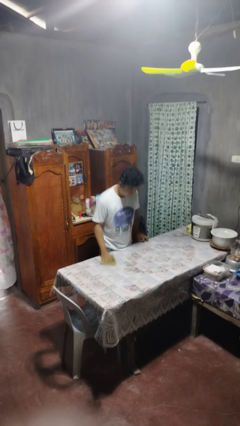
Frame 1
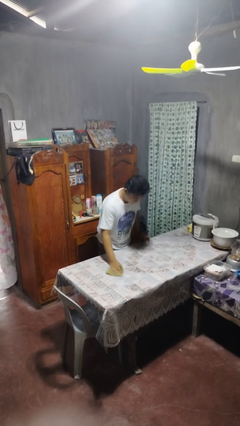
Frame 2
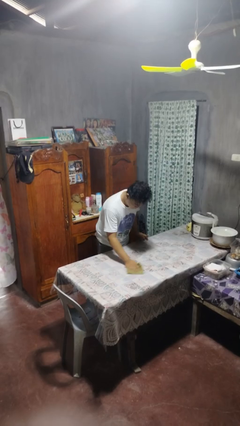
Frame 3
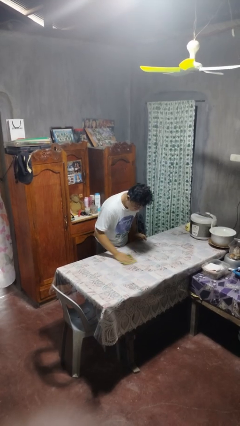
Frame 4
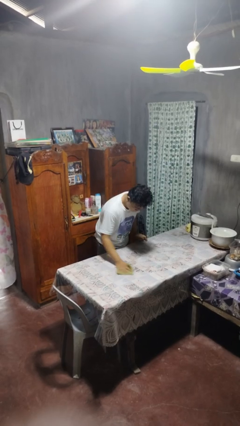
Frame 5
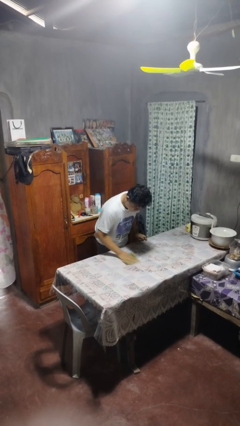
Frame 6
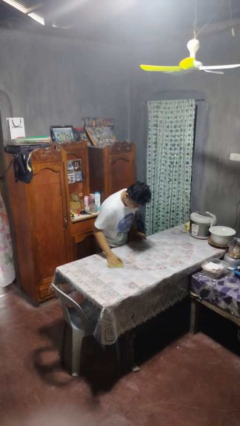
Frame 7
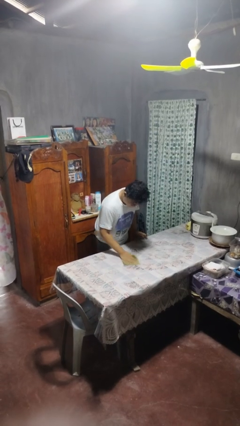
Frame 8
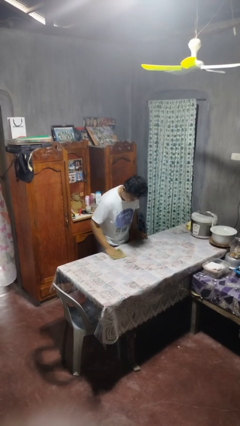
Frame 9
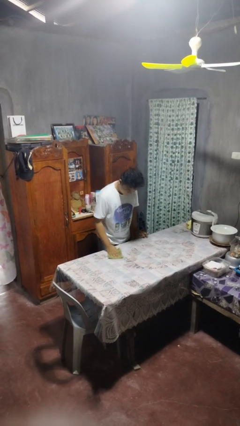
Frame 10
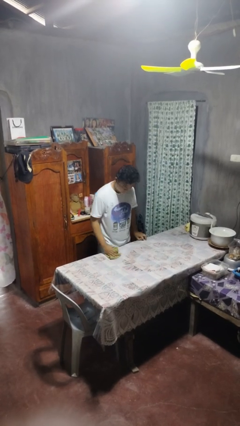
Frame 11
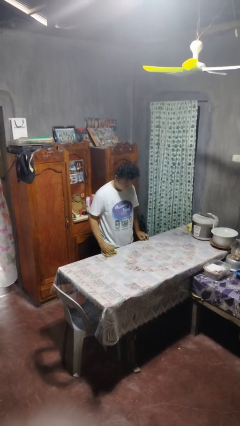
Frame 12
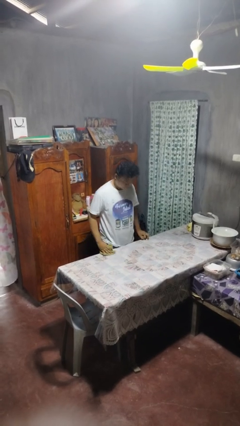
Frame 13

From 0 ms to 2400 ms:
person cleans table with rag

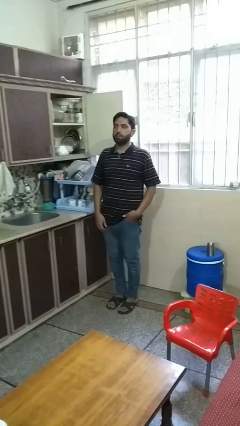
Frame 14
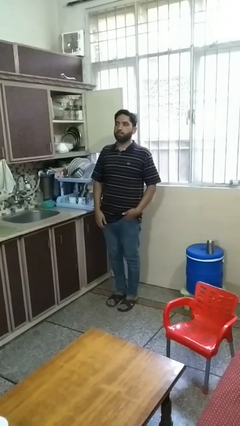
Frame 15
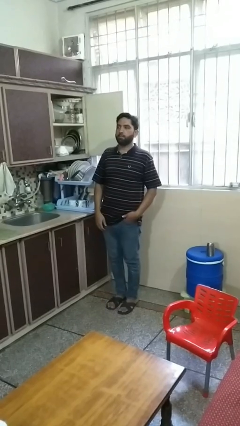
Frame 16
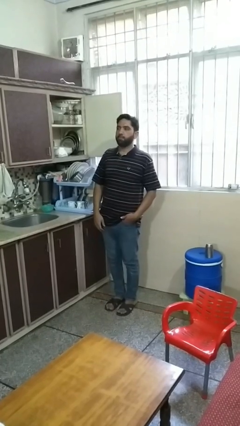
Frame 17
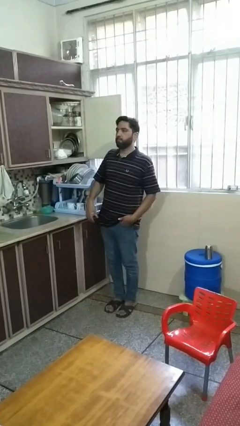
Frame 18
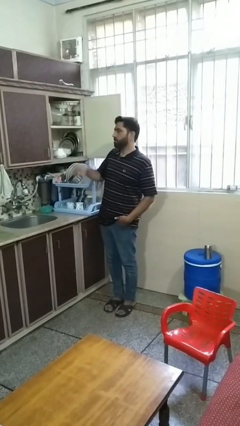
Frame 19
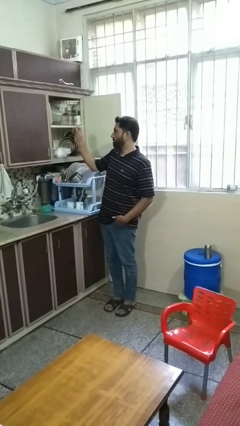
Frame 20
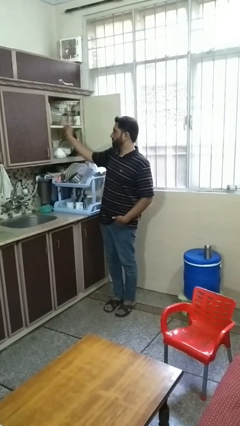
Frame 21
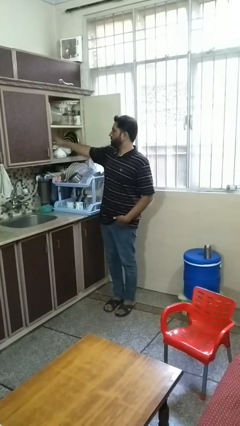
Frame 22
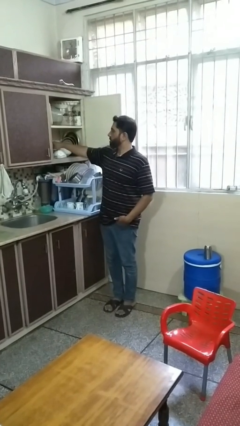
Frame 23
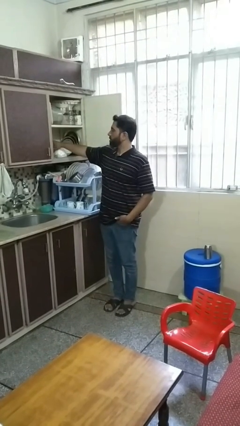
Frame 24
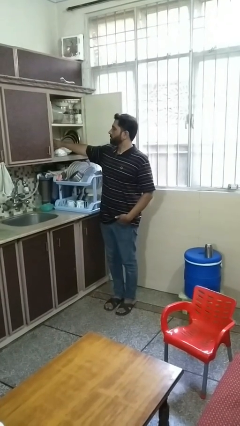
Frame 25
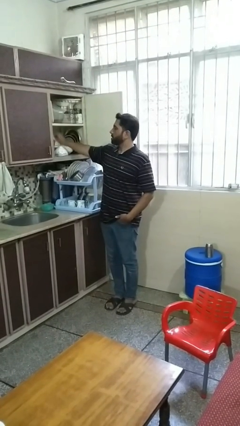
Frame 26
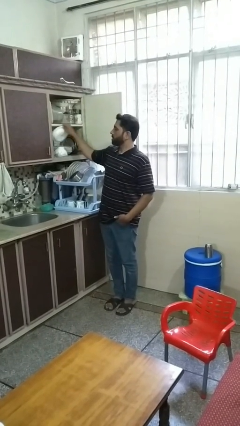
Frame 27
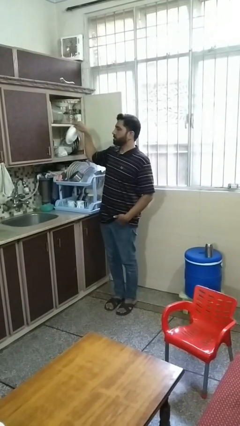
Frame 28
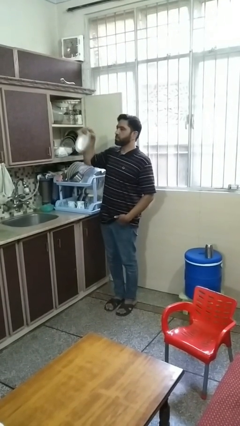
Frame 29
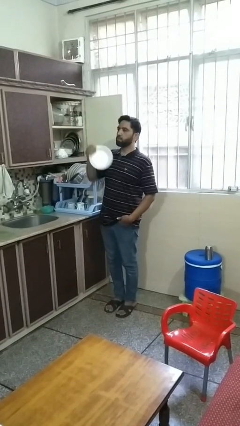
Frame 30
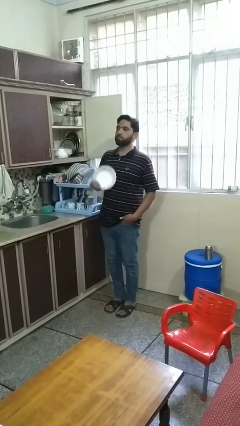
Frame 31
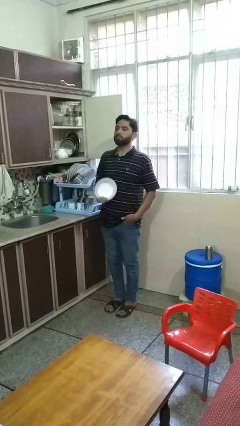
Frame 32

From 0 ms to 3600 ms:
person takes object from cabinet

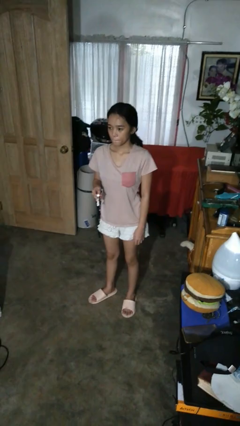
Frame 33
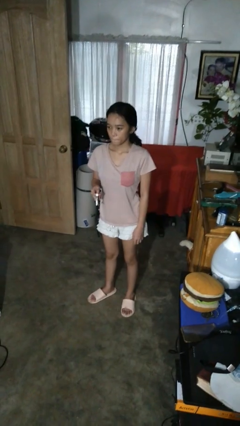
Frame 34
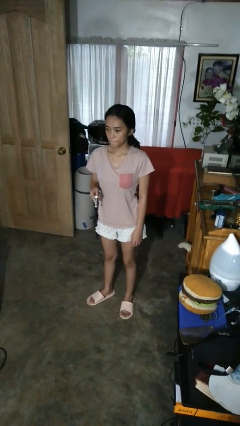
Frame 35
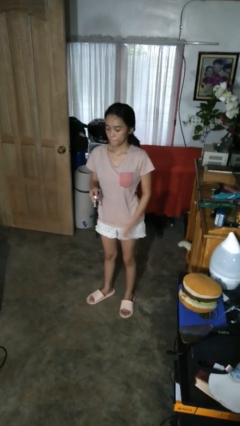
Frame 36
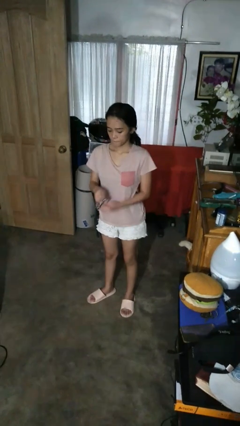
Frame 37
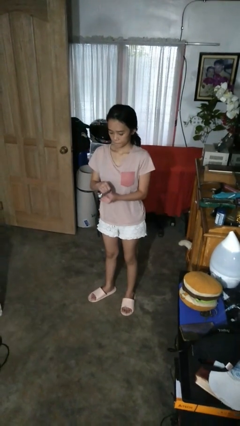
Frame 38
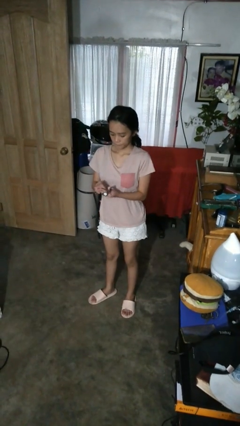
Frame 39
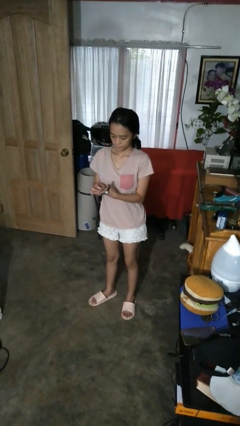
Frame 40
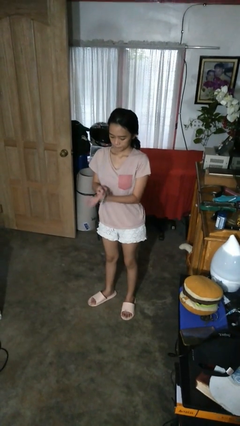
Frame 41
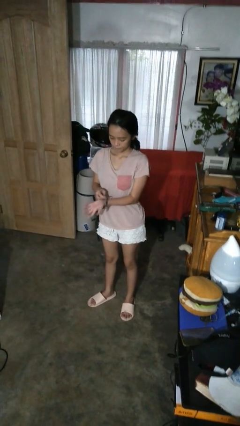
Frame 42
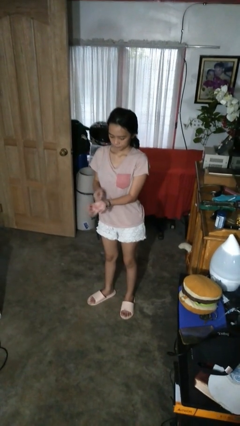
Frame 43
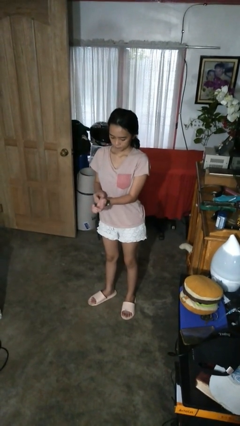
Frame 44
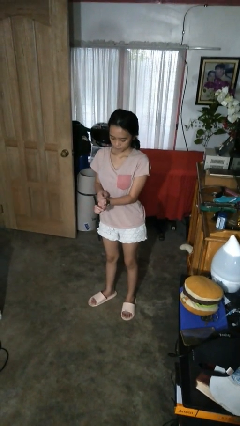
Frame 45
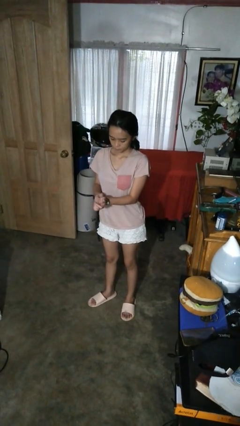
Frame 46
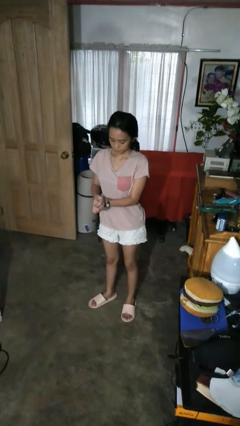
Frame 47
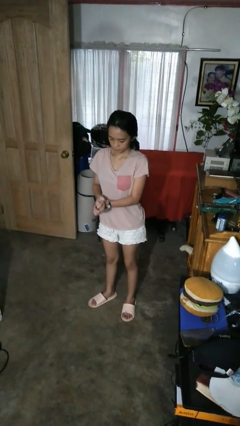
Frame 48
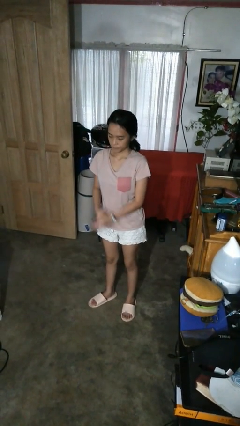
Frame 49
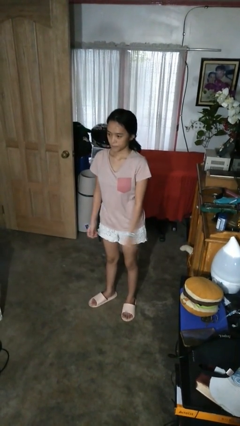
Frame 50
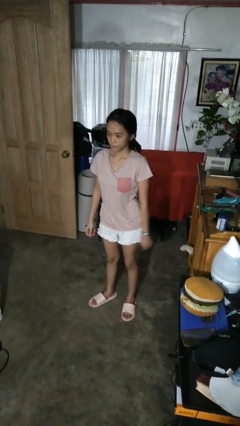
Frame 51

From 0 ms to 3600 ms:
person puts on wristwatch

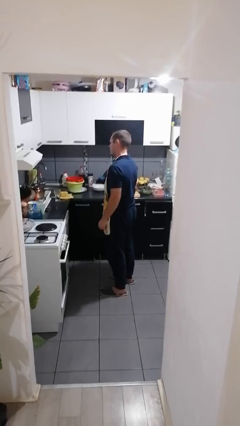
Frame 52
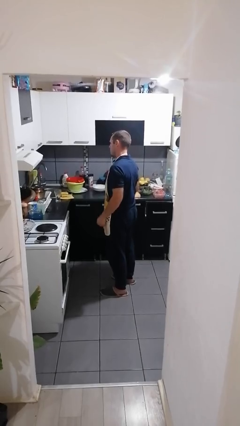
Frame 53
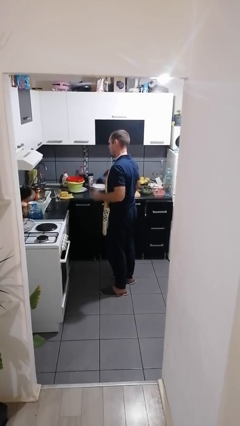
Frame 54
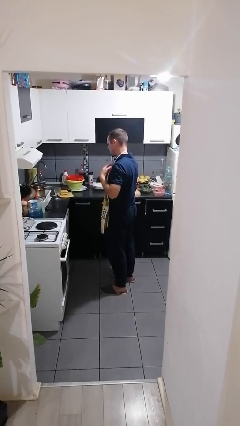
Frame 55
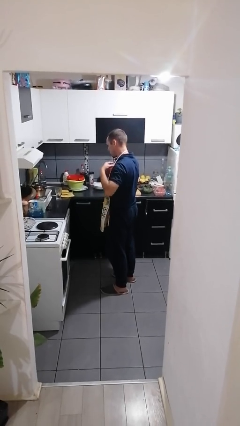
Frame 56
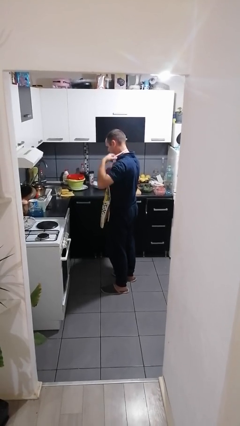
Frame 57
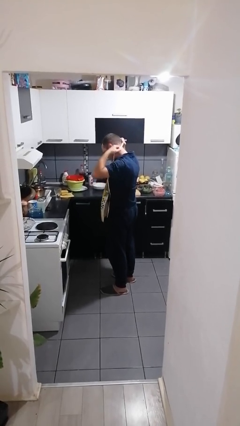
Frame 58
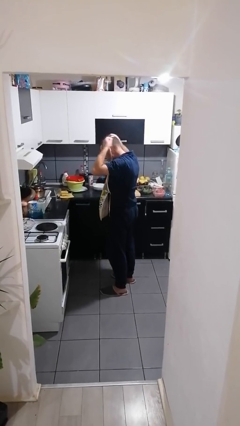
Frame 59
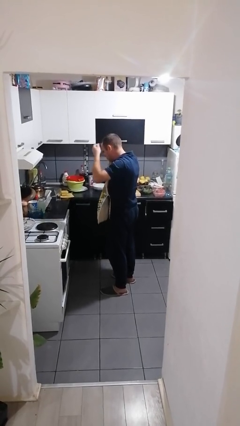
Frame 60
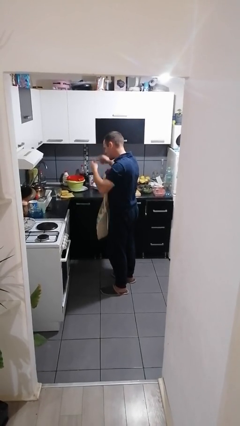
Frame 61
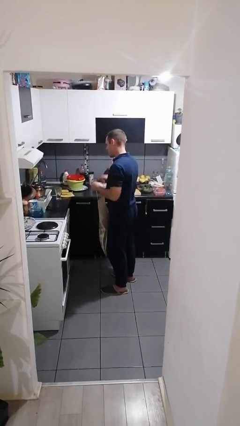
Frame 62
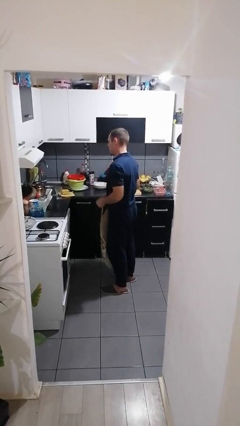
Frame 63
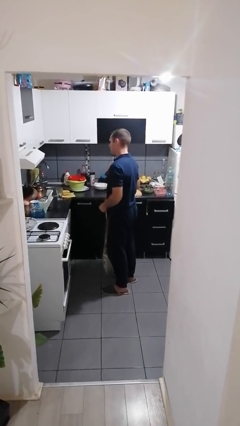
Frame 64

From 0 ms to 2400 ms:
person takes off apron

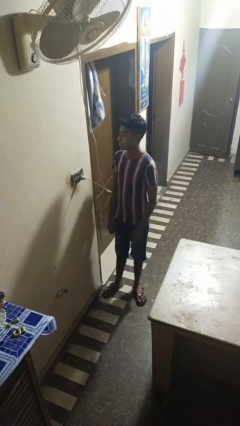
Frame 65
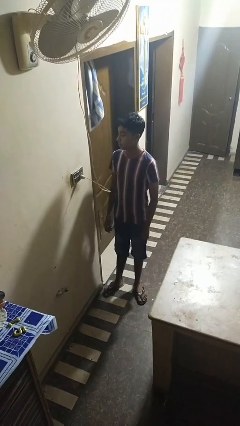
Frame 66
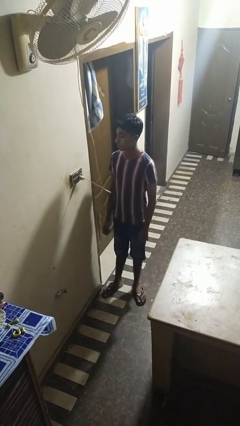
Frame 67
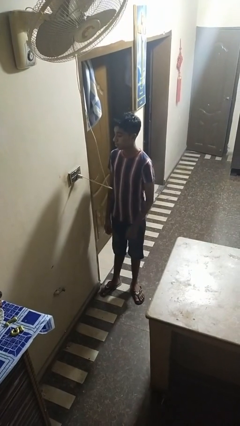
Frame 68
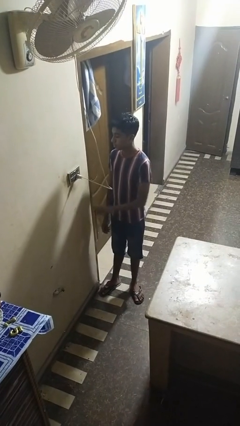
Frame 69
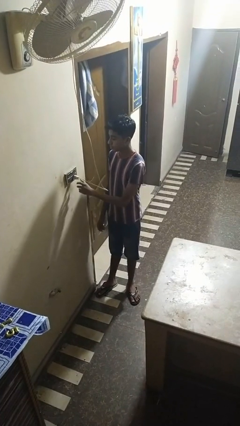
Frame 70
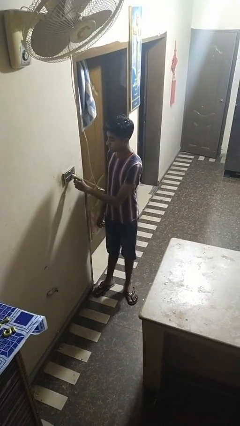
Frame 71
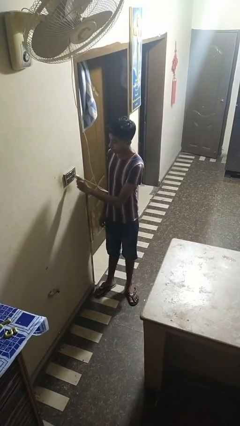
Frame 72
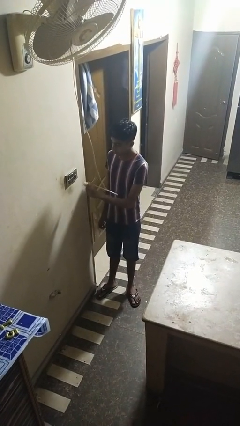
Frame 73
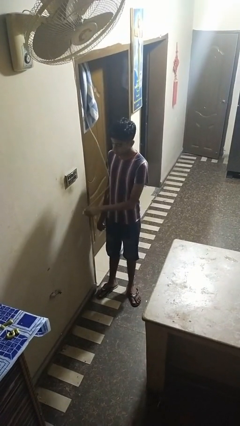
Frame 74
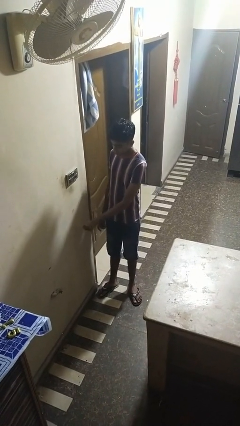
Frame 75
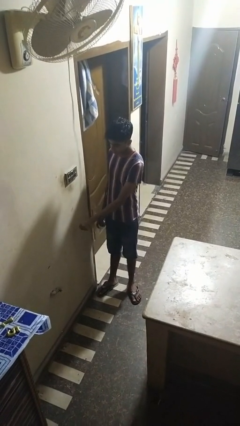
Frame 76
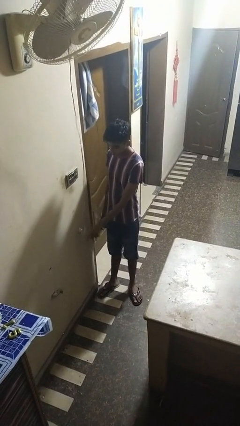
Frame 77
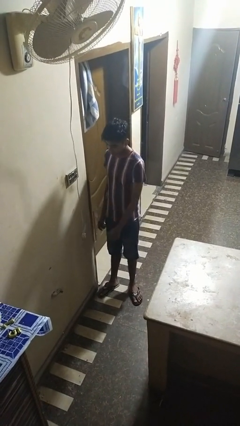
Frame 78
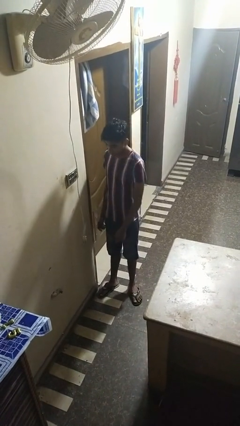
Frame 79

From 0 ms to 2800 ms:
person unplugs from electrical socket

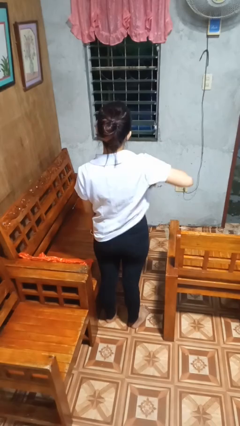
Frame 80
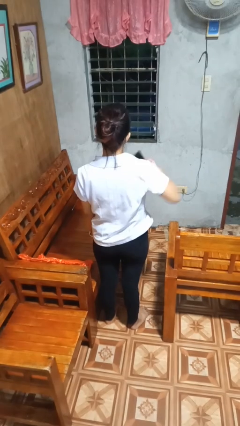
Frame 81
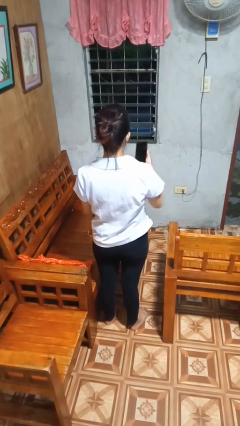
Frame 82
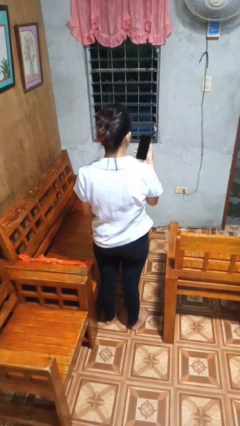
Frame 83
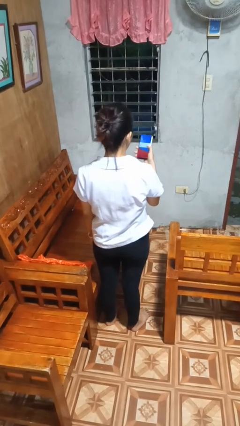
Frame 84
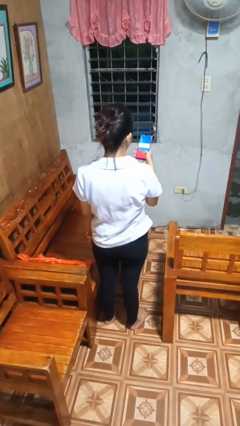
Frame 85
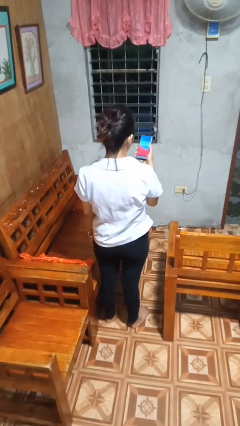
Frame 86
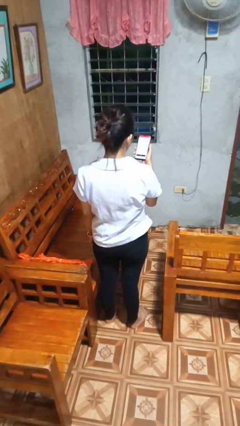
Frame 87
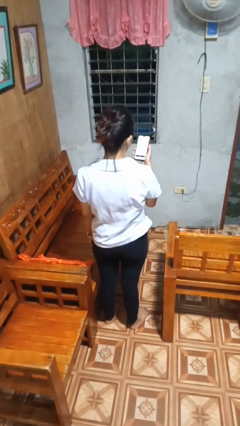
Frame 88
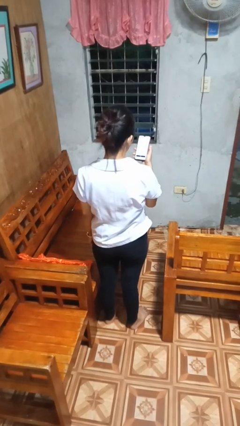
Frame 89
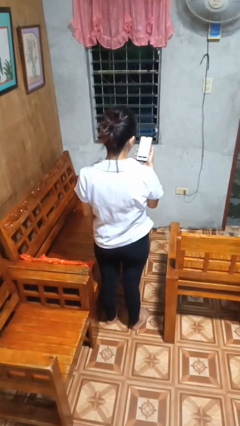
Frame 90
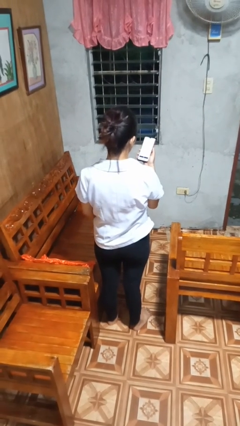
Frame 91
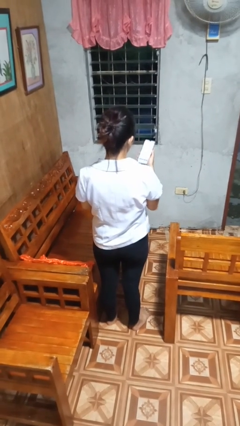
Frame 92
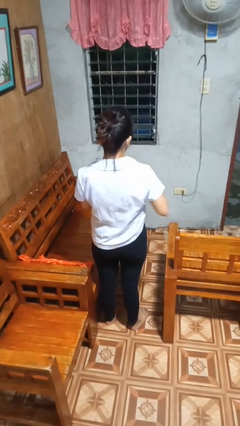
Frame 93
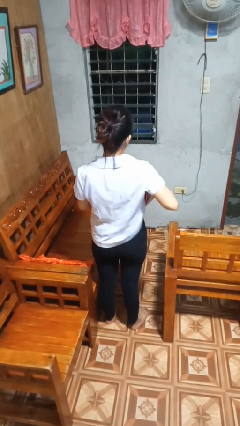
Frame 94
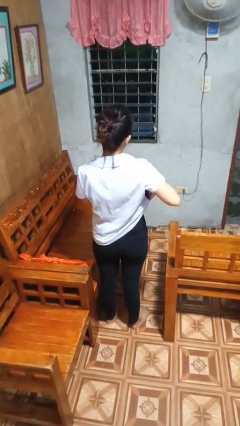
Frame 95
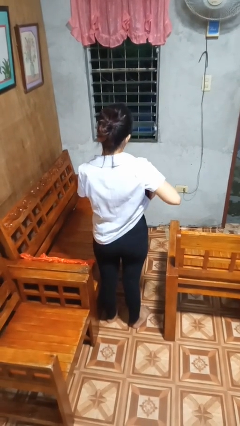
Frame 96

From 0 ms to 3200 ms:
person takes phone from pocket
